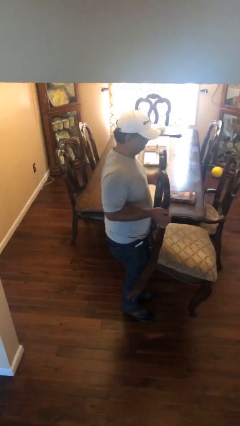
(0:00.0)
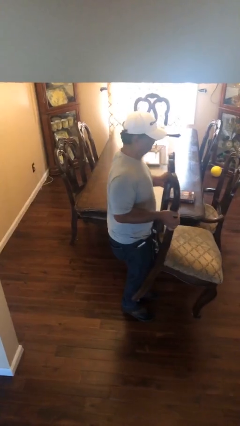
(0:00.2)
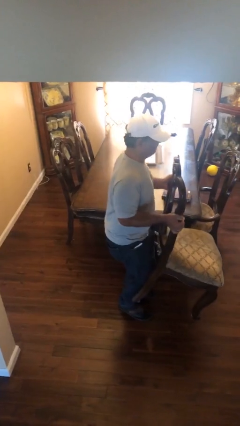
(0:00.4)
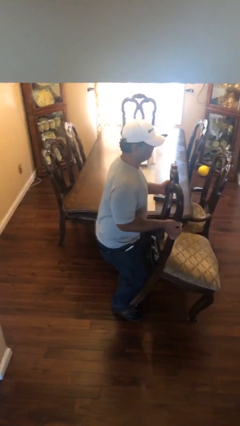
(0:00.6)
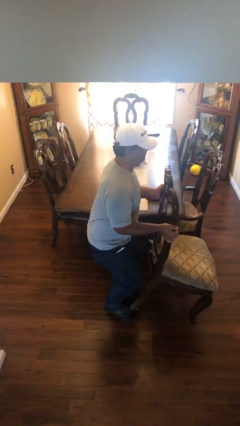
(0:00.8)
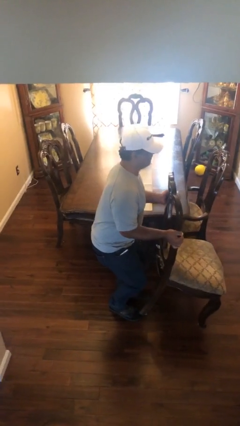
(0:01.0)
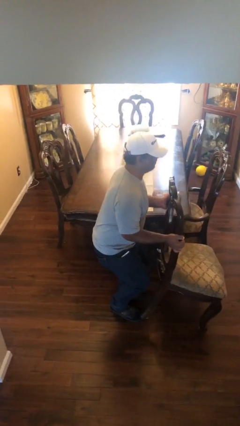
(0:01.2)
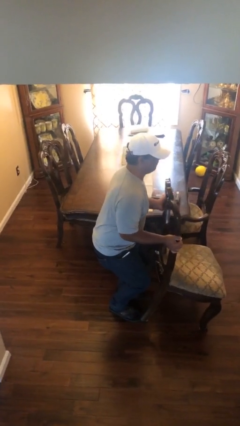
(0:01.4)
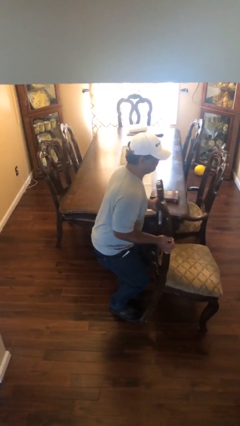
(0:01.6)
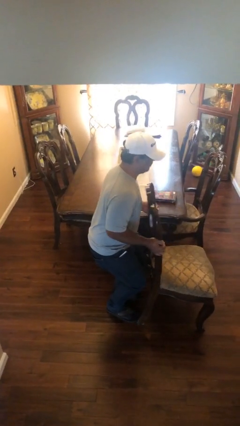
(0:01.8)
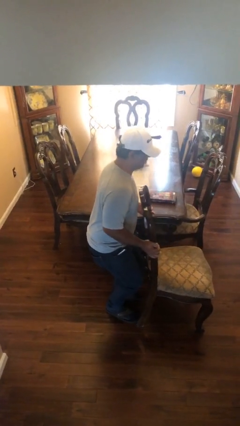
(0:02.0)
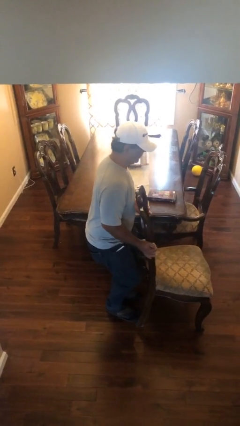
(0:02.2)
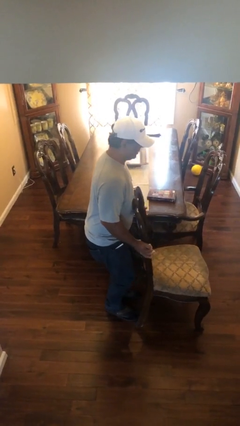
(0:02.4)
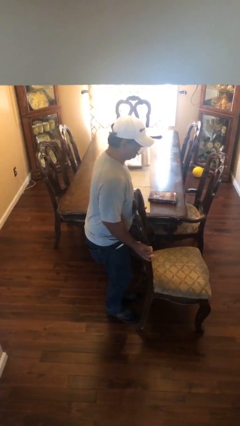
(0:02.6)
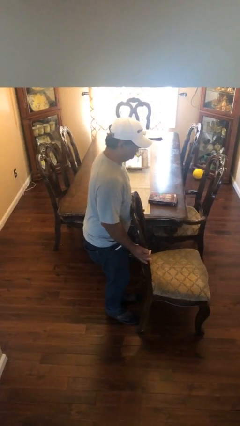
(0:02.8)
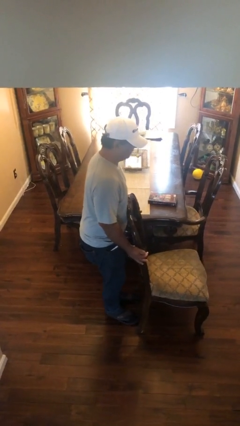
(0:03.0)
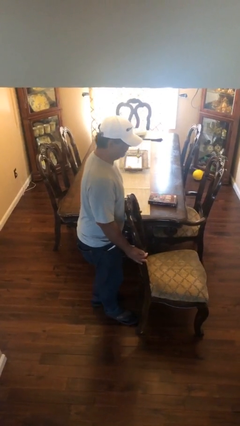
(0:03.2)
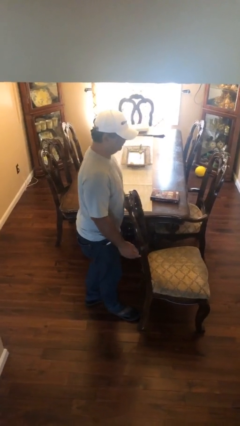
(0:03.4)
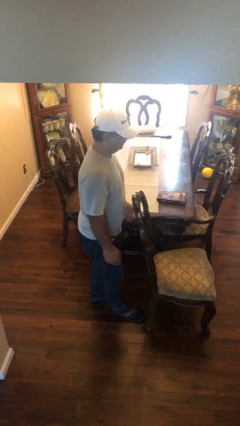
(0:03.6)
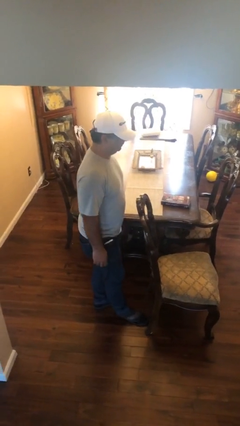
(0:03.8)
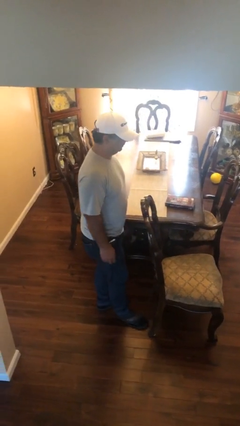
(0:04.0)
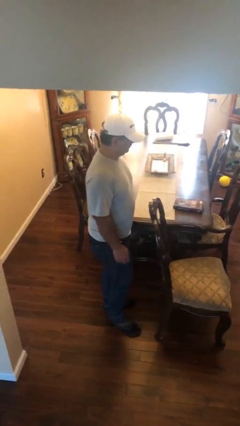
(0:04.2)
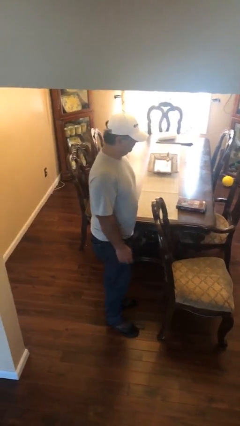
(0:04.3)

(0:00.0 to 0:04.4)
person puts down object on floor

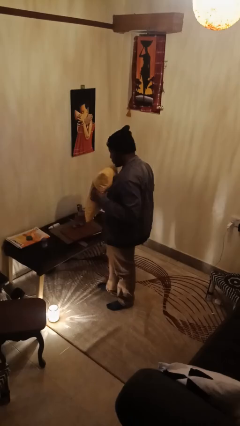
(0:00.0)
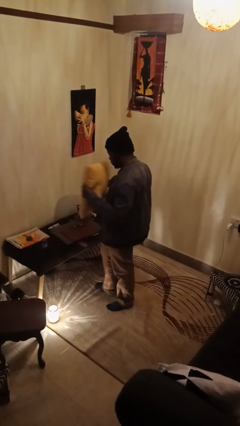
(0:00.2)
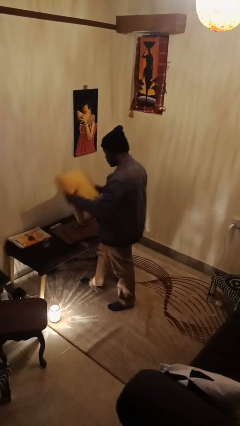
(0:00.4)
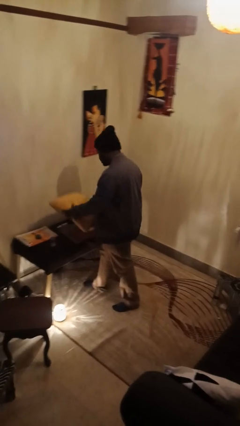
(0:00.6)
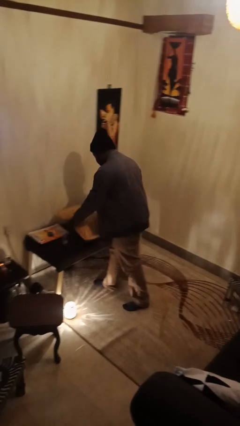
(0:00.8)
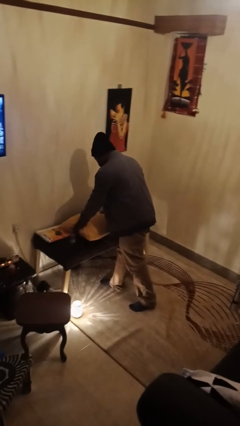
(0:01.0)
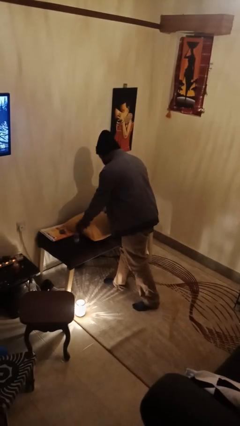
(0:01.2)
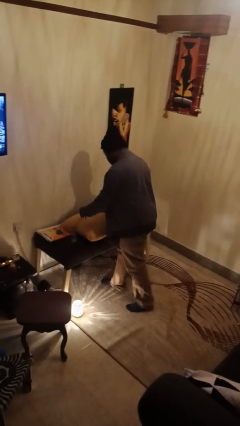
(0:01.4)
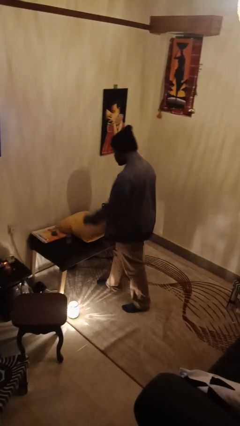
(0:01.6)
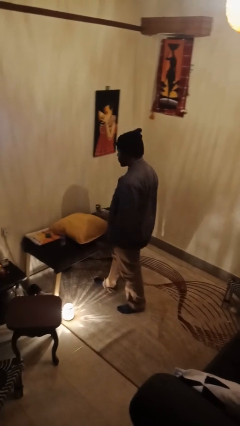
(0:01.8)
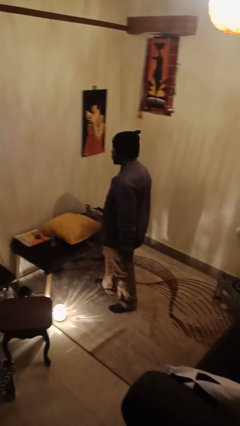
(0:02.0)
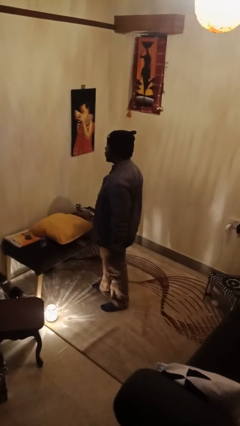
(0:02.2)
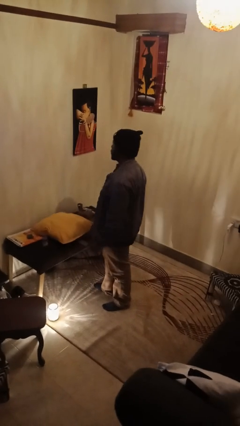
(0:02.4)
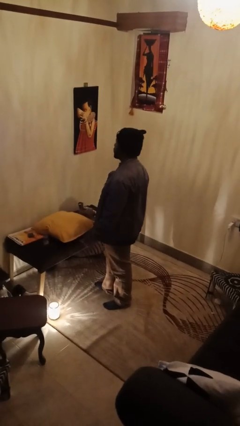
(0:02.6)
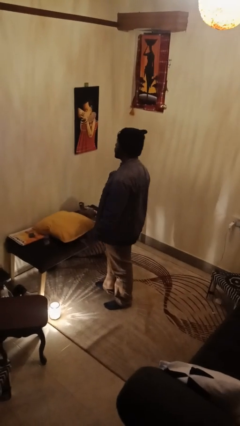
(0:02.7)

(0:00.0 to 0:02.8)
person puts down object on countertop

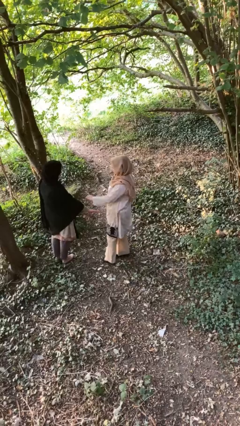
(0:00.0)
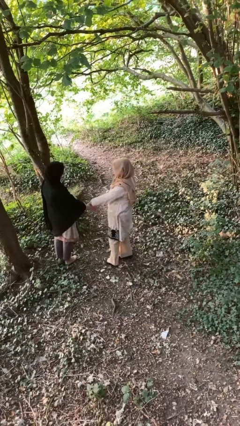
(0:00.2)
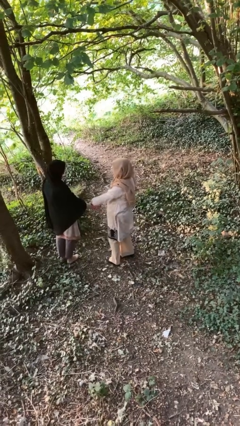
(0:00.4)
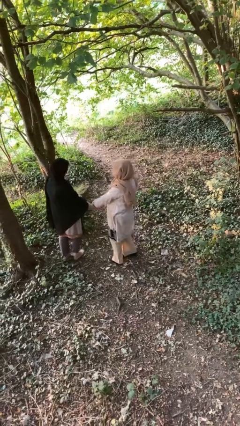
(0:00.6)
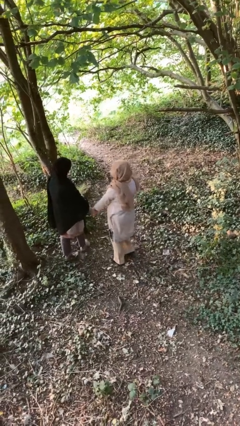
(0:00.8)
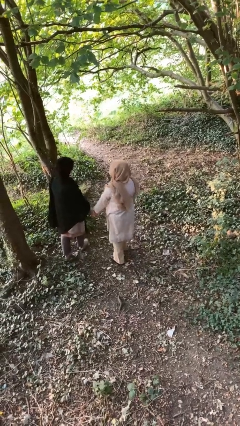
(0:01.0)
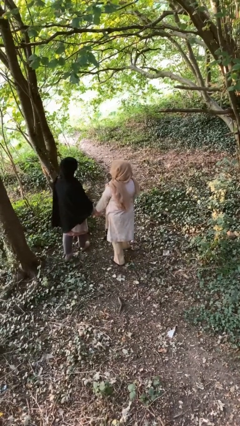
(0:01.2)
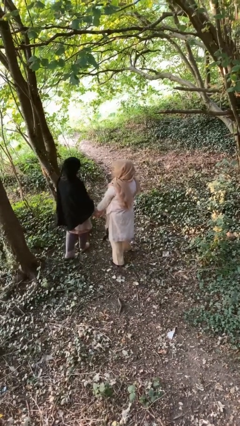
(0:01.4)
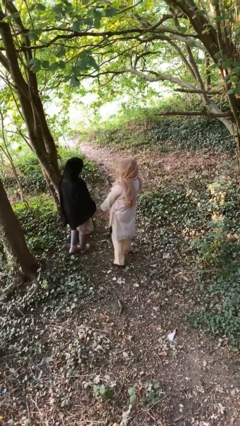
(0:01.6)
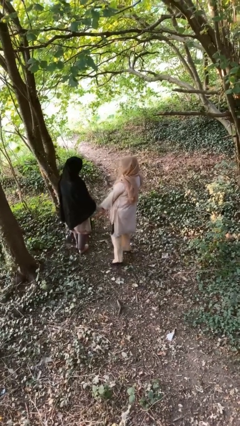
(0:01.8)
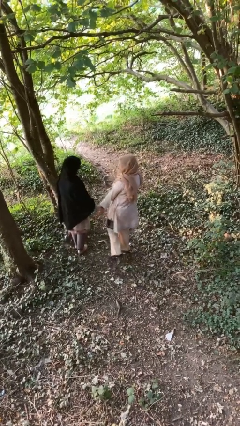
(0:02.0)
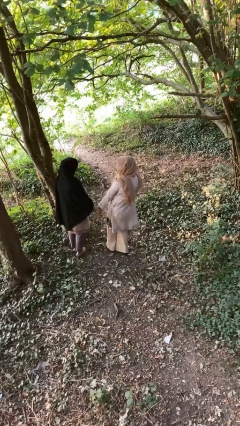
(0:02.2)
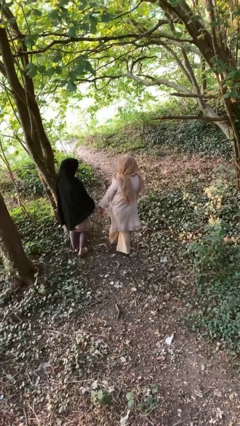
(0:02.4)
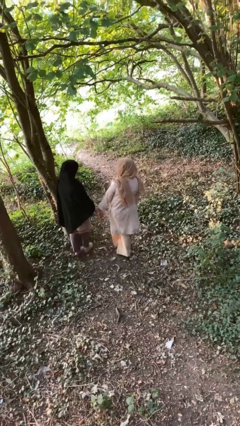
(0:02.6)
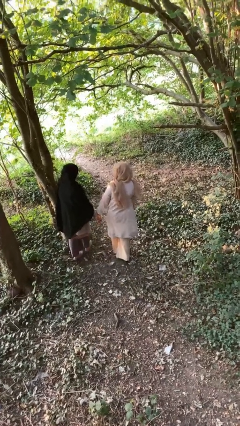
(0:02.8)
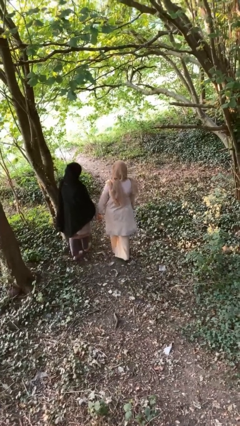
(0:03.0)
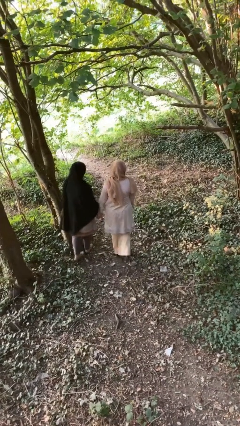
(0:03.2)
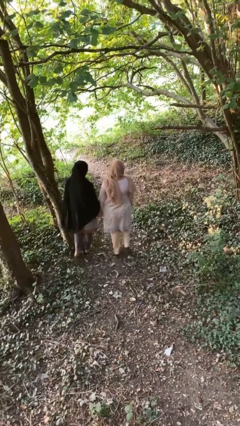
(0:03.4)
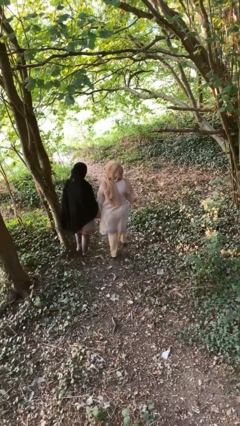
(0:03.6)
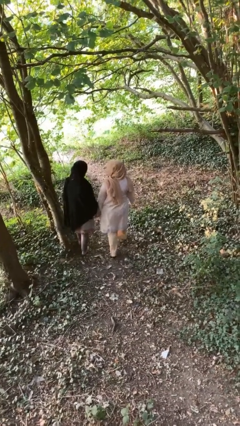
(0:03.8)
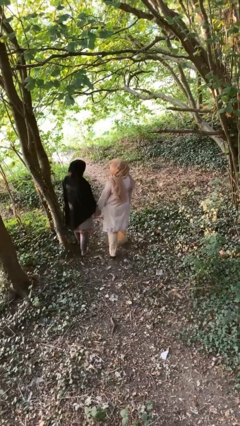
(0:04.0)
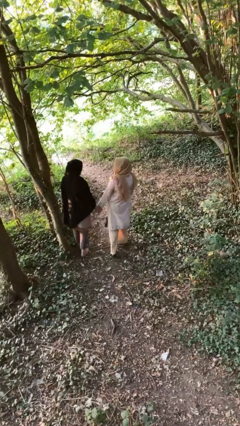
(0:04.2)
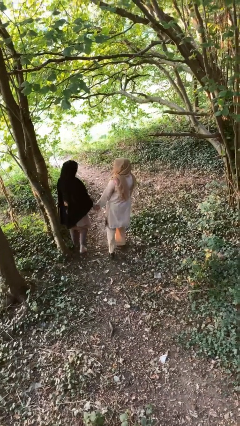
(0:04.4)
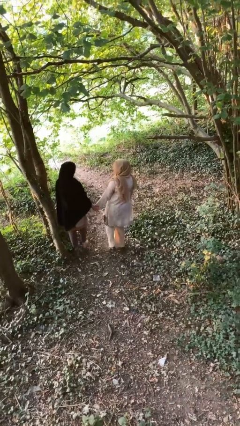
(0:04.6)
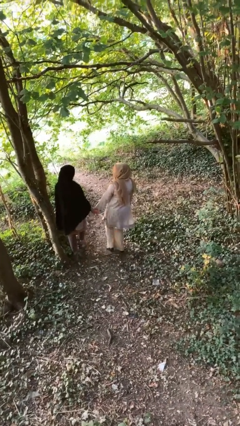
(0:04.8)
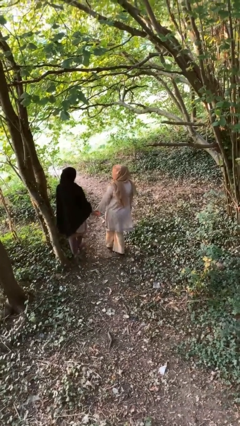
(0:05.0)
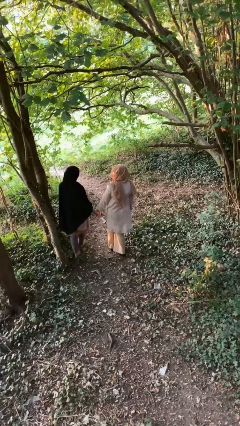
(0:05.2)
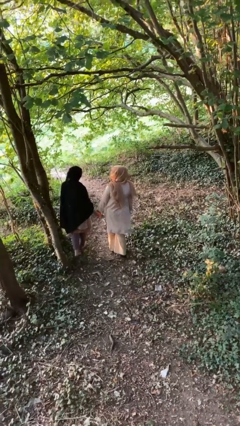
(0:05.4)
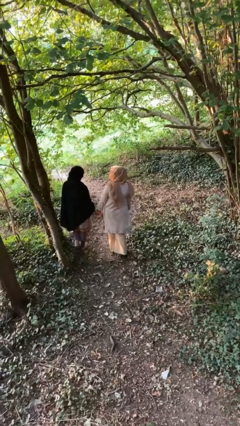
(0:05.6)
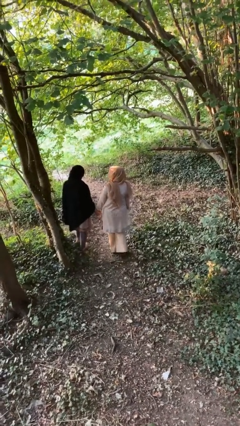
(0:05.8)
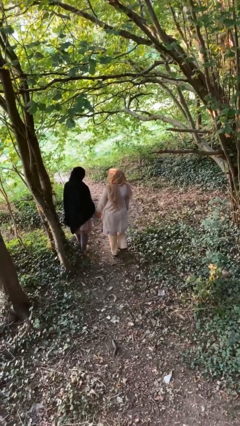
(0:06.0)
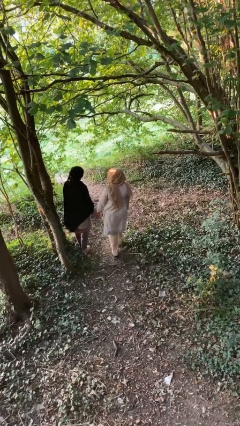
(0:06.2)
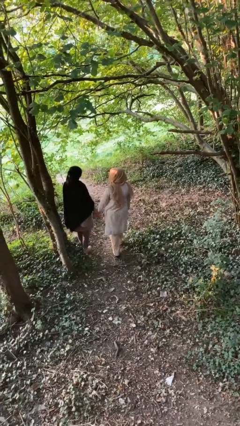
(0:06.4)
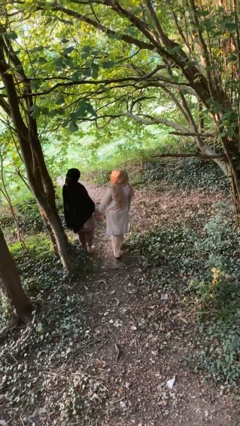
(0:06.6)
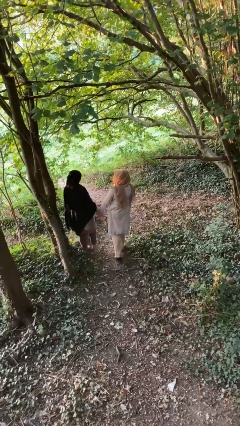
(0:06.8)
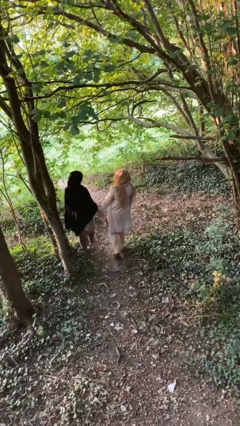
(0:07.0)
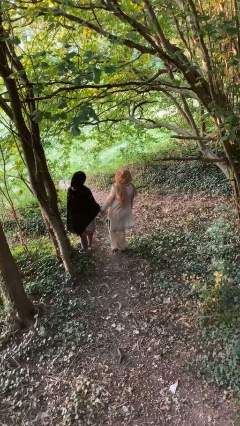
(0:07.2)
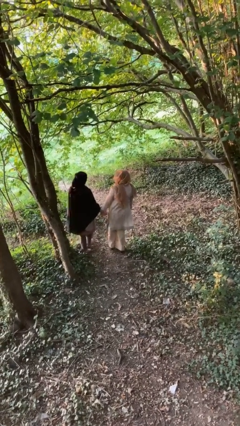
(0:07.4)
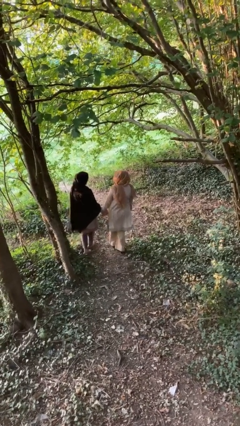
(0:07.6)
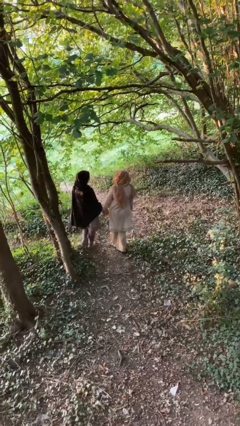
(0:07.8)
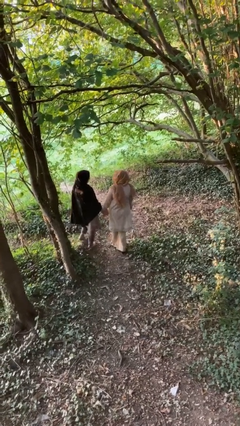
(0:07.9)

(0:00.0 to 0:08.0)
person holds hand

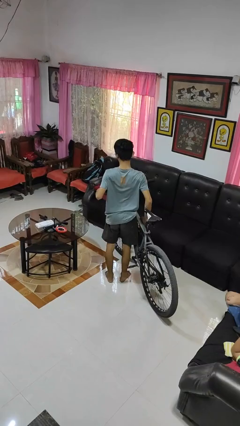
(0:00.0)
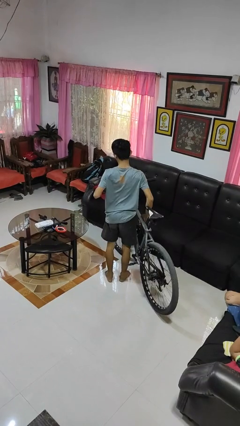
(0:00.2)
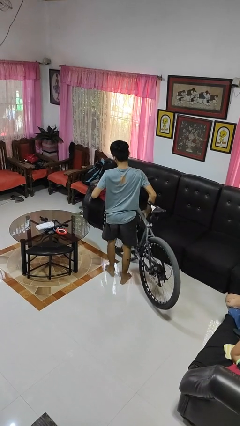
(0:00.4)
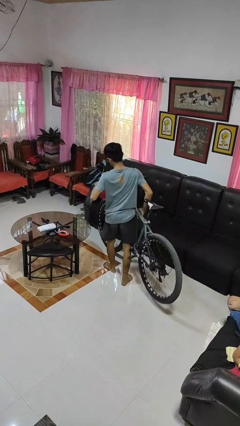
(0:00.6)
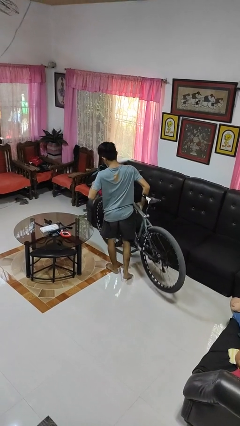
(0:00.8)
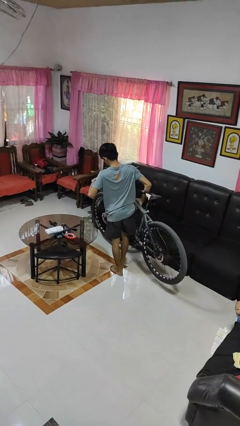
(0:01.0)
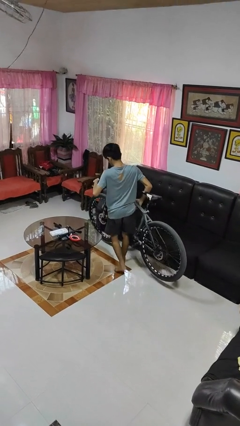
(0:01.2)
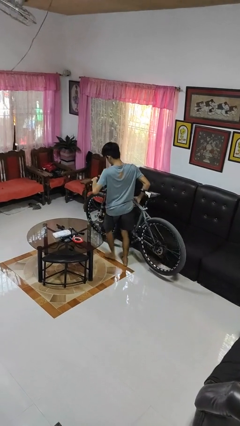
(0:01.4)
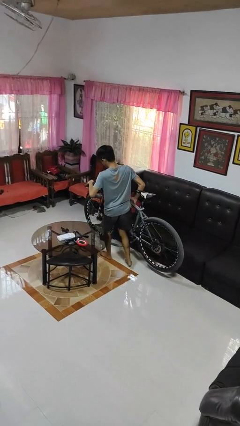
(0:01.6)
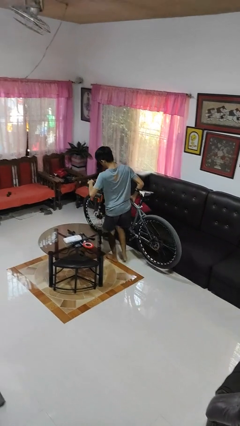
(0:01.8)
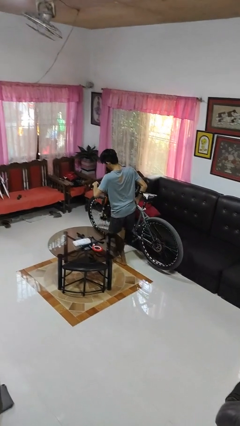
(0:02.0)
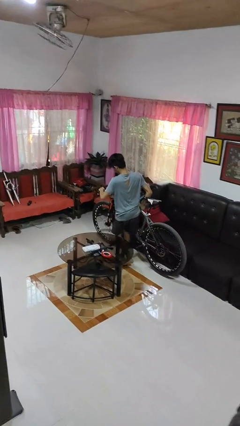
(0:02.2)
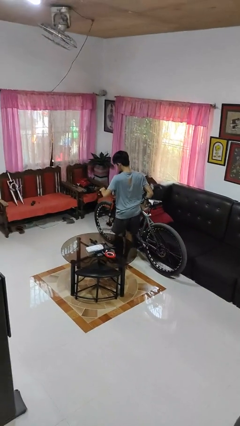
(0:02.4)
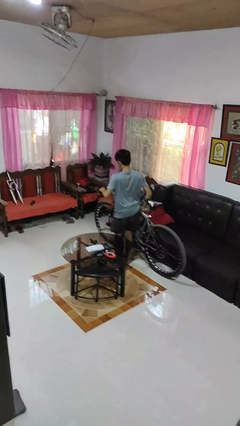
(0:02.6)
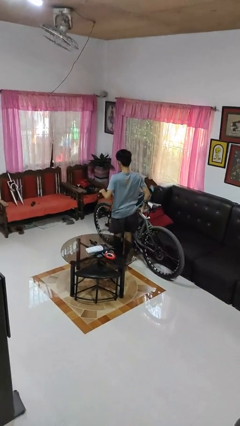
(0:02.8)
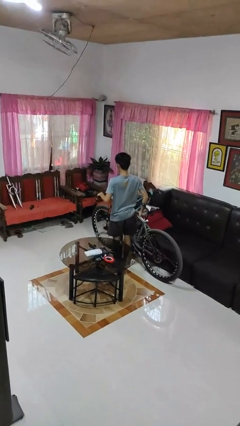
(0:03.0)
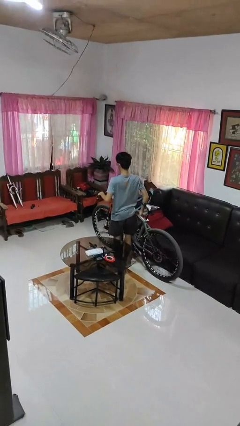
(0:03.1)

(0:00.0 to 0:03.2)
person carries bicycle
